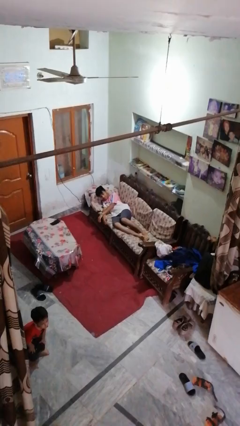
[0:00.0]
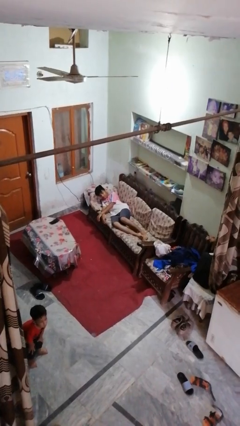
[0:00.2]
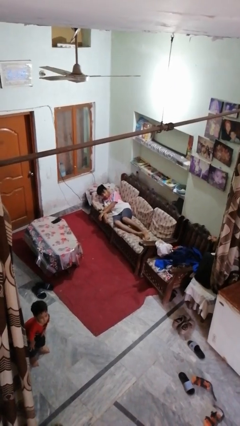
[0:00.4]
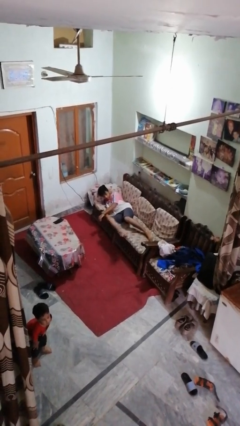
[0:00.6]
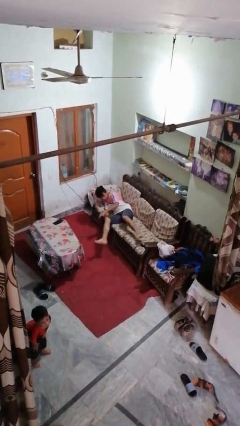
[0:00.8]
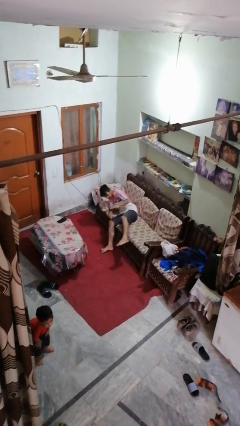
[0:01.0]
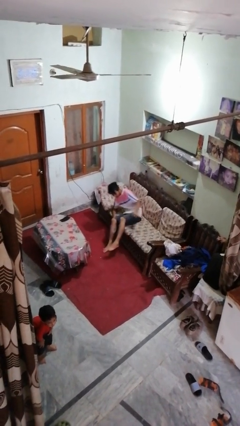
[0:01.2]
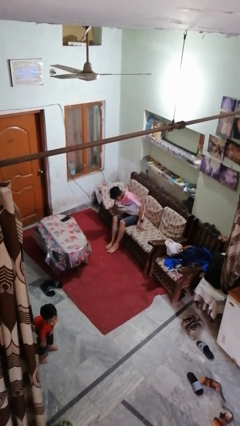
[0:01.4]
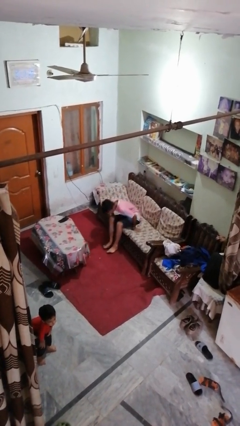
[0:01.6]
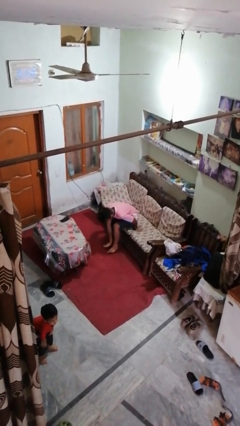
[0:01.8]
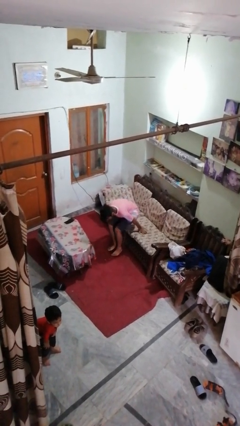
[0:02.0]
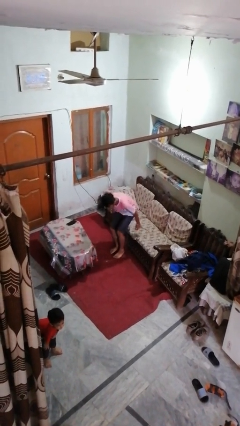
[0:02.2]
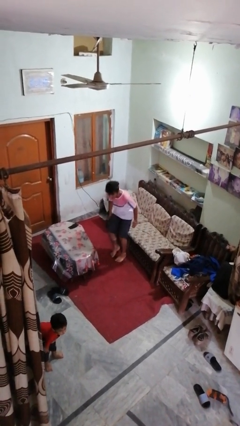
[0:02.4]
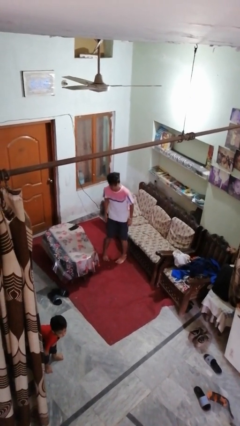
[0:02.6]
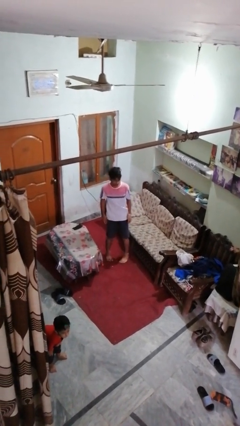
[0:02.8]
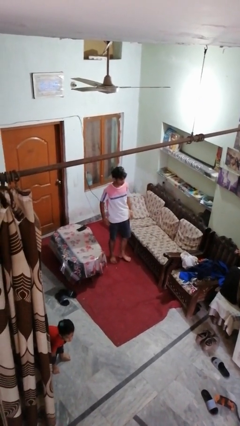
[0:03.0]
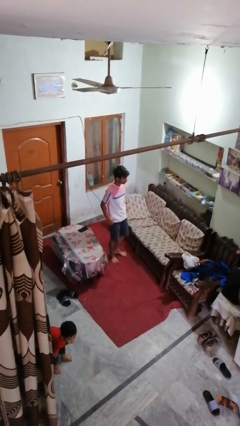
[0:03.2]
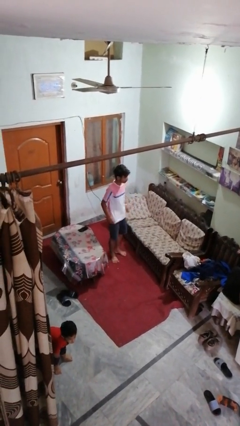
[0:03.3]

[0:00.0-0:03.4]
person stands up

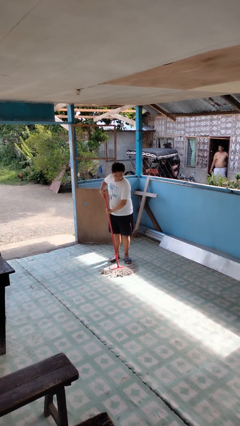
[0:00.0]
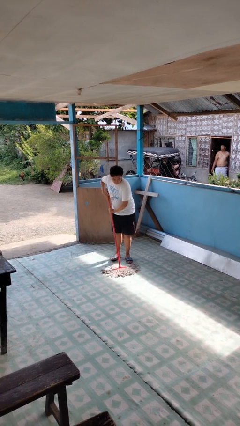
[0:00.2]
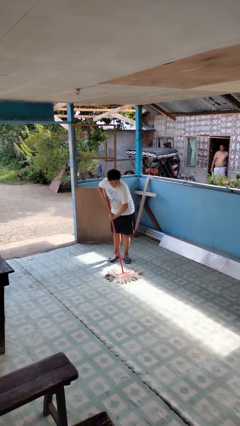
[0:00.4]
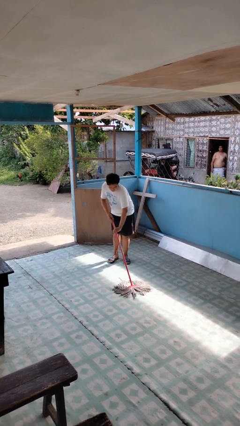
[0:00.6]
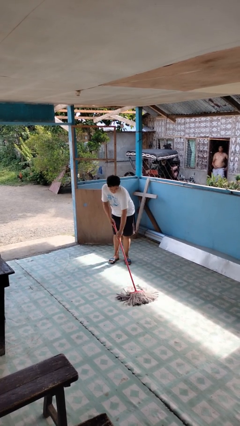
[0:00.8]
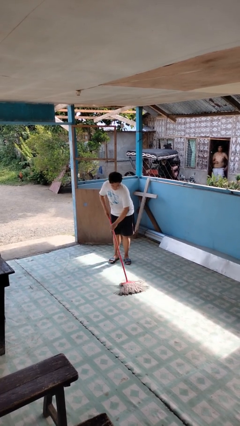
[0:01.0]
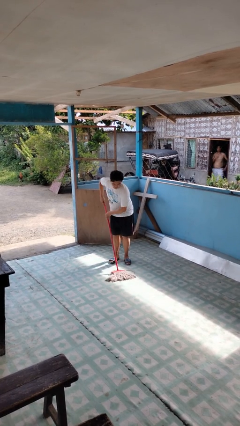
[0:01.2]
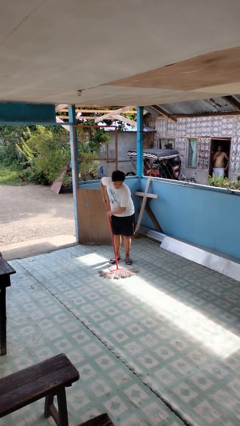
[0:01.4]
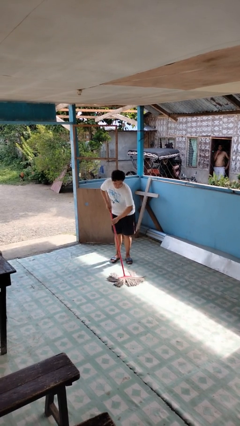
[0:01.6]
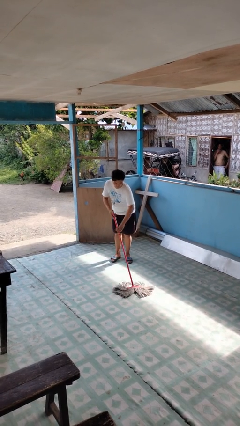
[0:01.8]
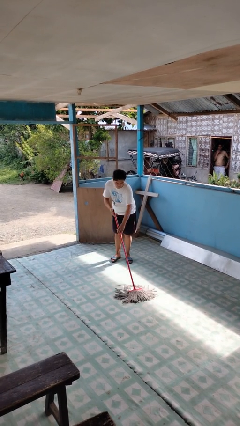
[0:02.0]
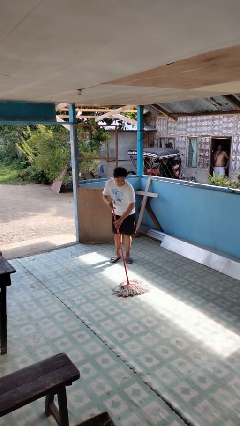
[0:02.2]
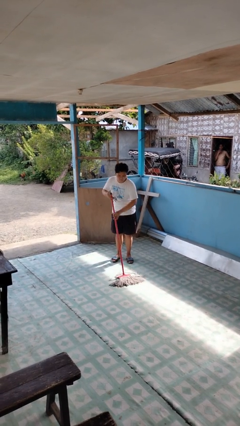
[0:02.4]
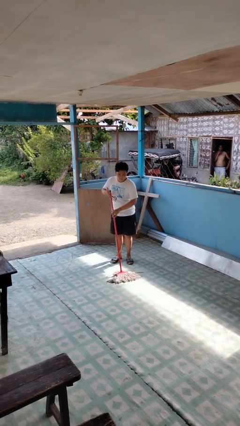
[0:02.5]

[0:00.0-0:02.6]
person mops

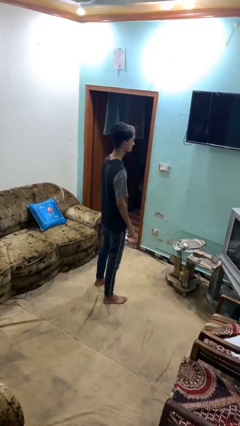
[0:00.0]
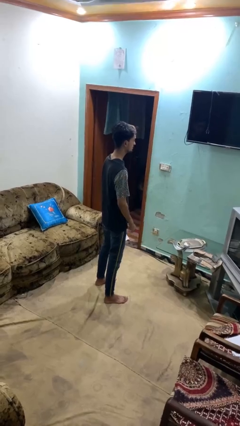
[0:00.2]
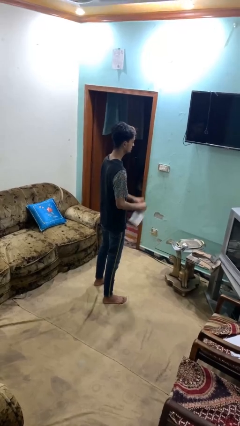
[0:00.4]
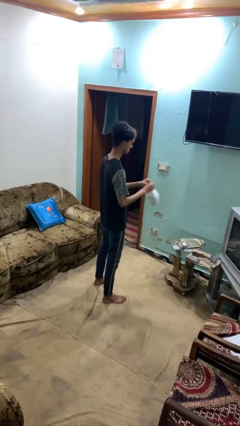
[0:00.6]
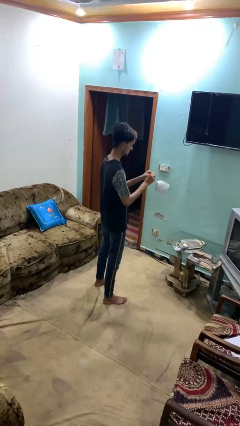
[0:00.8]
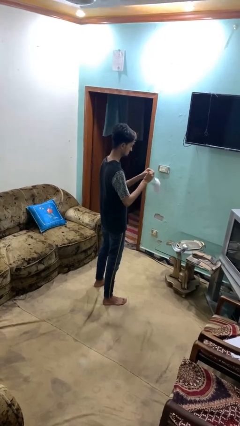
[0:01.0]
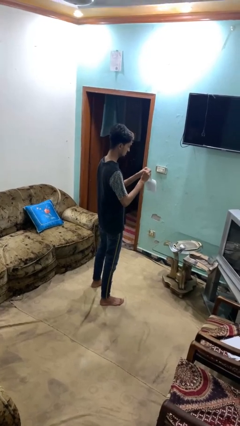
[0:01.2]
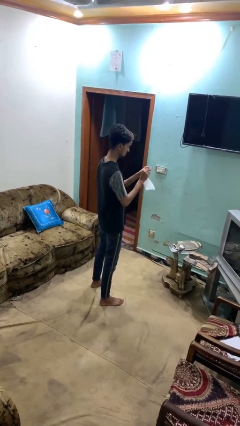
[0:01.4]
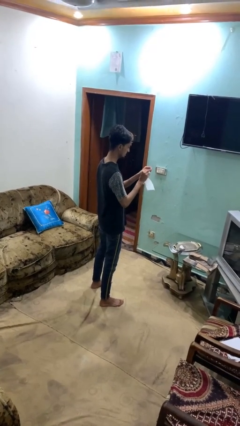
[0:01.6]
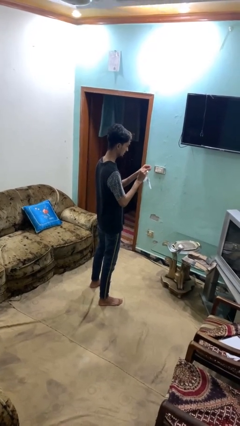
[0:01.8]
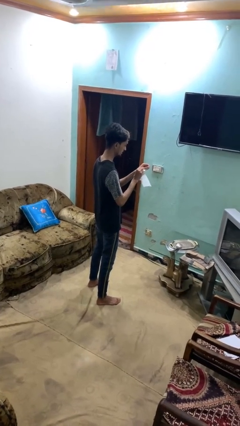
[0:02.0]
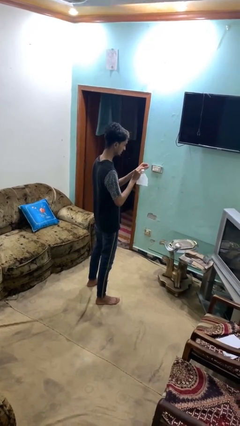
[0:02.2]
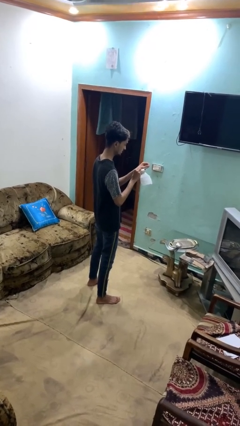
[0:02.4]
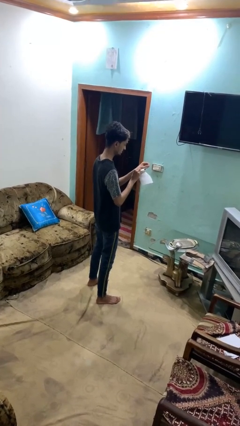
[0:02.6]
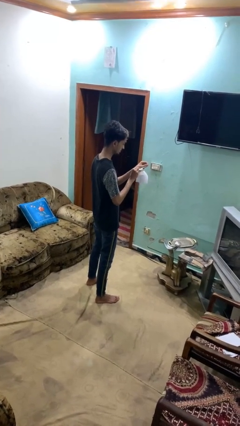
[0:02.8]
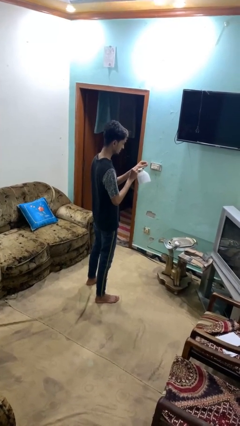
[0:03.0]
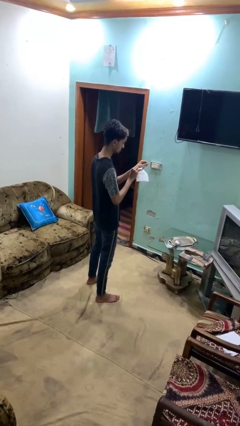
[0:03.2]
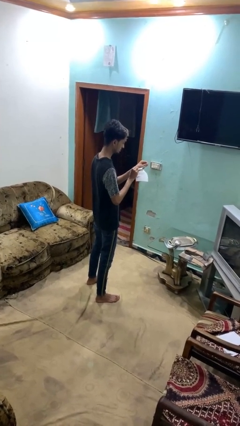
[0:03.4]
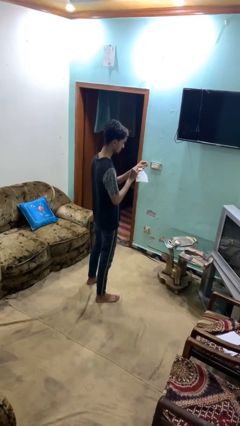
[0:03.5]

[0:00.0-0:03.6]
person tears paper

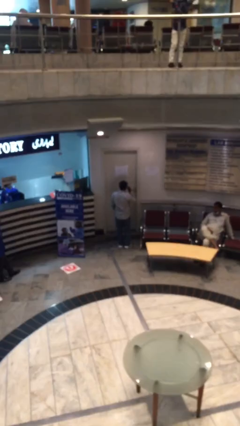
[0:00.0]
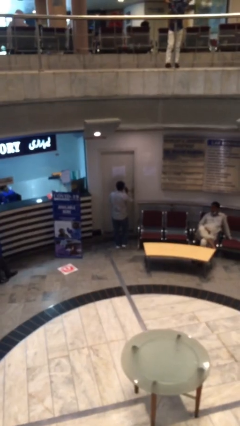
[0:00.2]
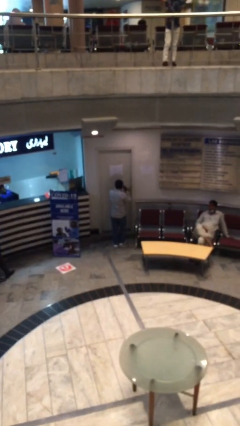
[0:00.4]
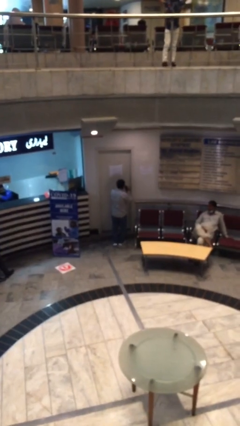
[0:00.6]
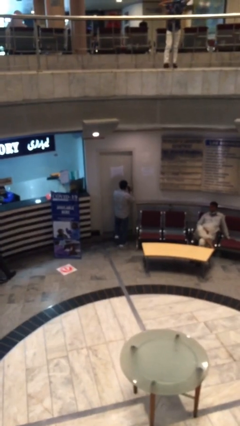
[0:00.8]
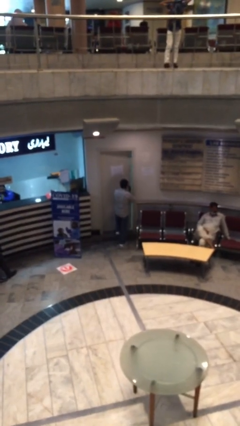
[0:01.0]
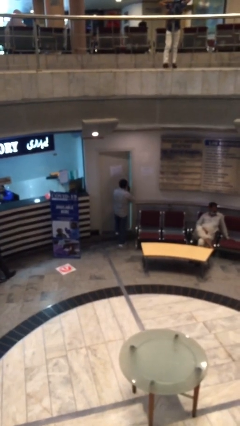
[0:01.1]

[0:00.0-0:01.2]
person opens facility door

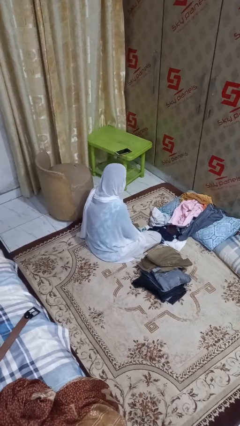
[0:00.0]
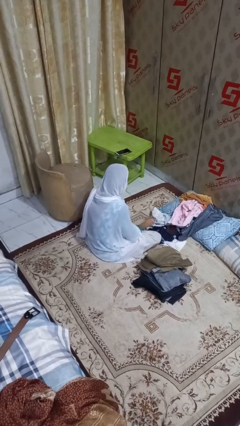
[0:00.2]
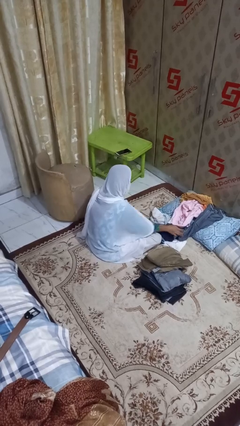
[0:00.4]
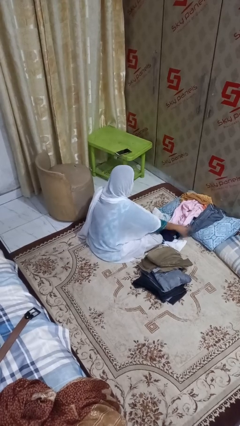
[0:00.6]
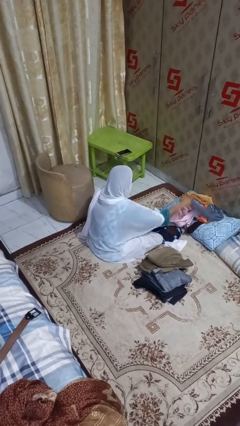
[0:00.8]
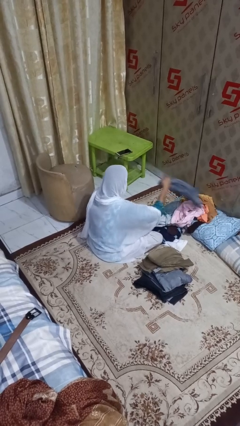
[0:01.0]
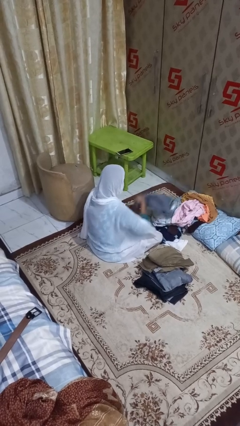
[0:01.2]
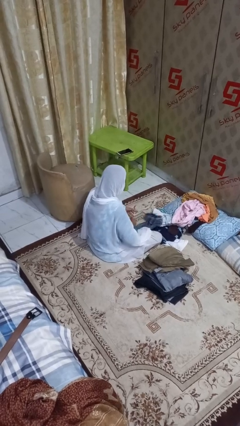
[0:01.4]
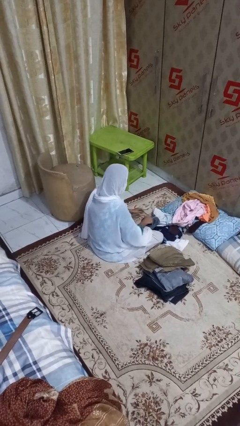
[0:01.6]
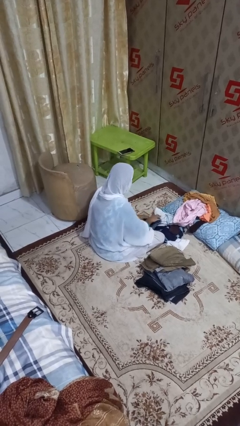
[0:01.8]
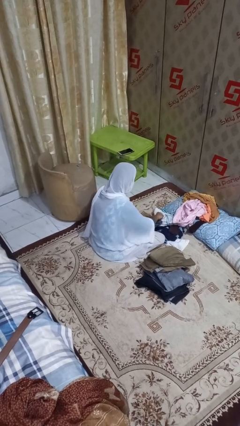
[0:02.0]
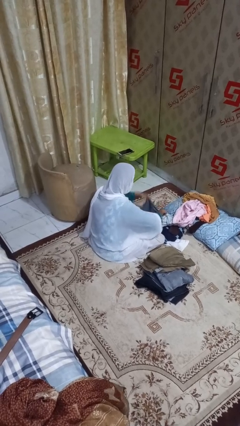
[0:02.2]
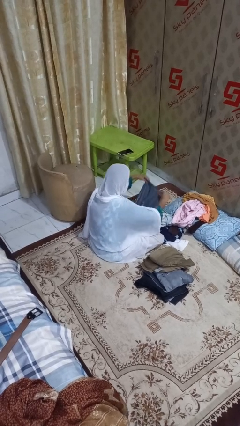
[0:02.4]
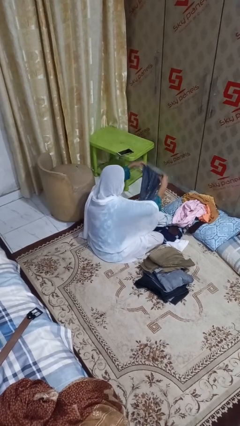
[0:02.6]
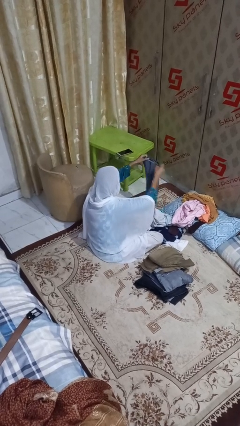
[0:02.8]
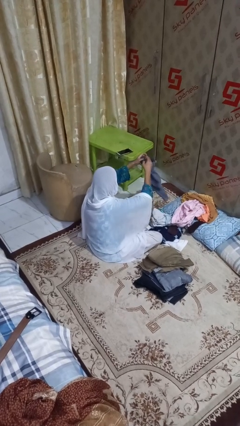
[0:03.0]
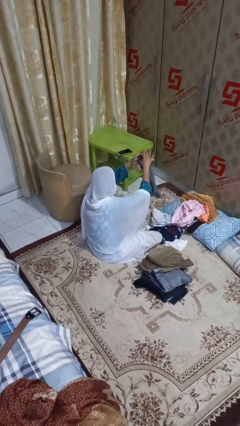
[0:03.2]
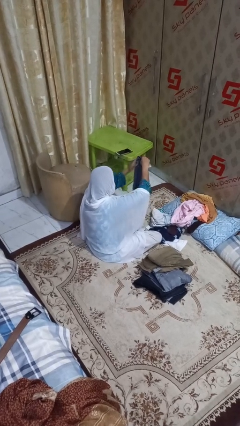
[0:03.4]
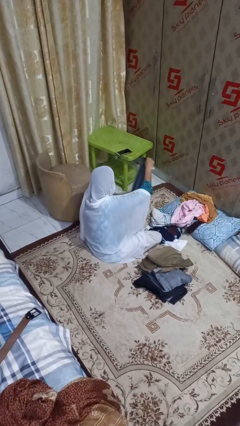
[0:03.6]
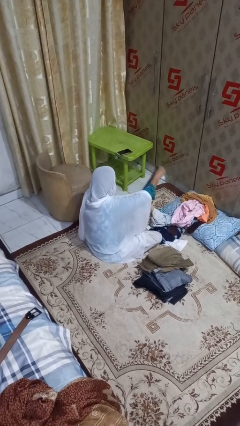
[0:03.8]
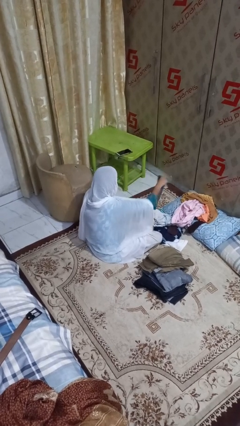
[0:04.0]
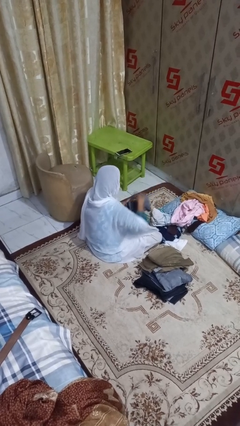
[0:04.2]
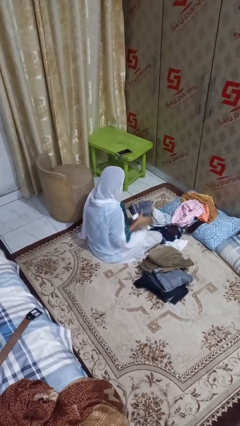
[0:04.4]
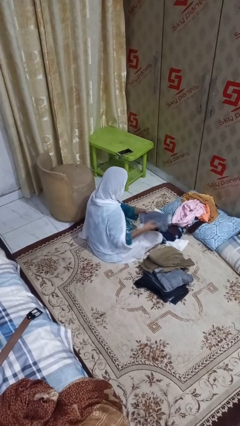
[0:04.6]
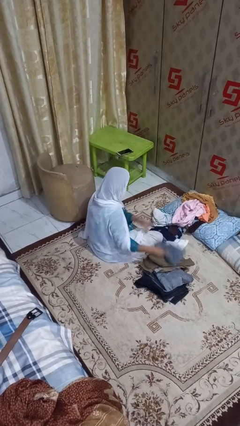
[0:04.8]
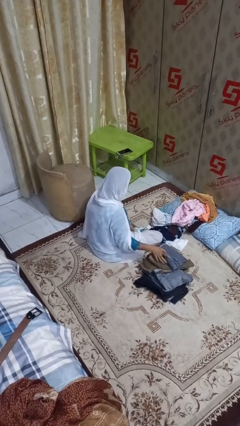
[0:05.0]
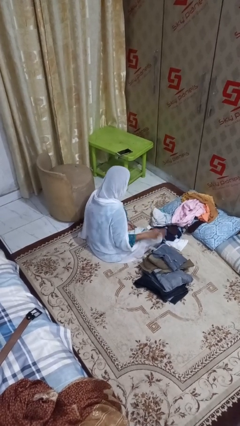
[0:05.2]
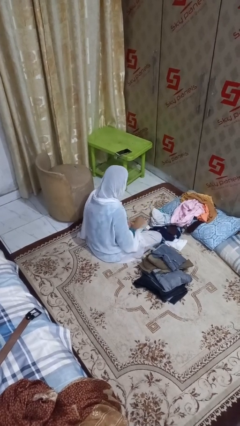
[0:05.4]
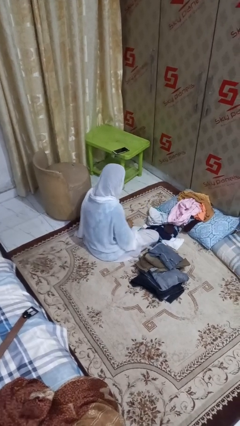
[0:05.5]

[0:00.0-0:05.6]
person folds pants

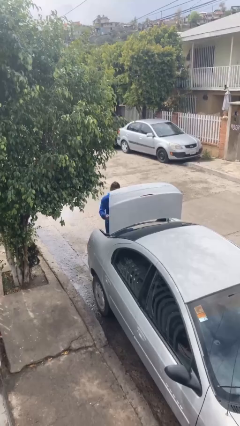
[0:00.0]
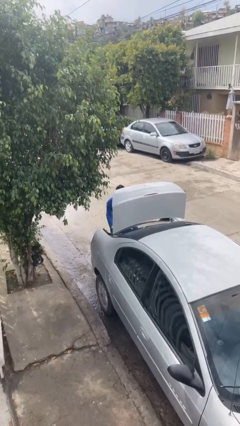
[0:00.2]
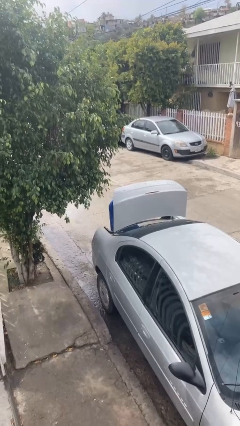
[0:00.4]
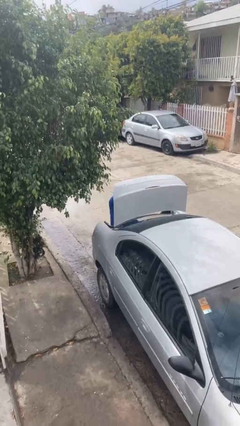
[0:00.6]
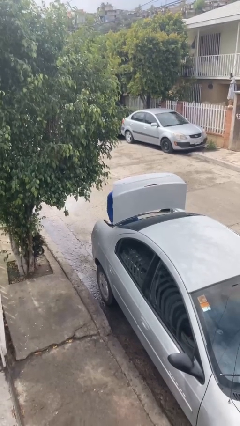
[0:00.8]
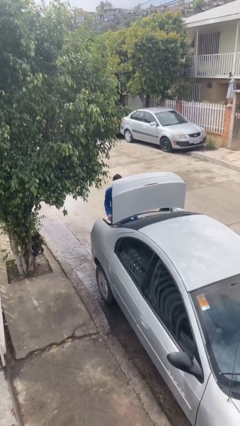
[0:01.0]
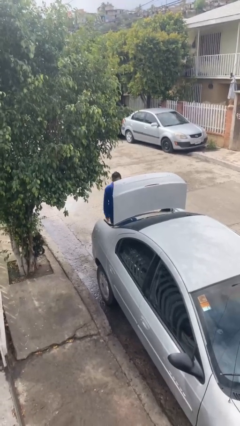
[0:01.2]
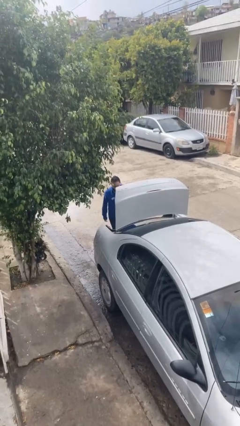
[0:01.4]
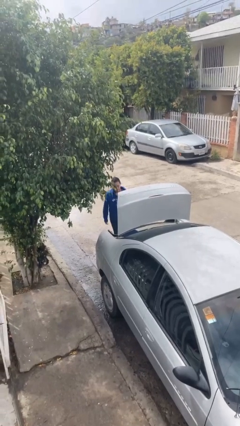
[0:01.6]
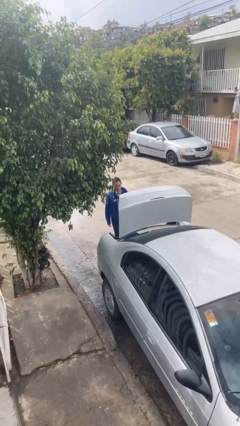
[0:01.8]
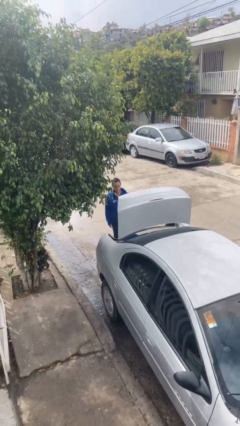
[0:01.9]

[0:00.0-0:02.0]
person loads car
